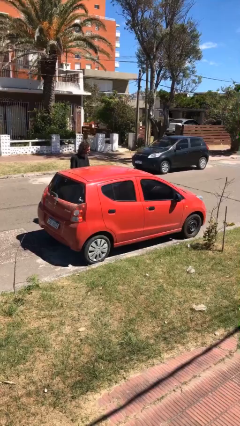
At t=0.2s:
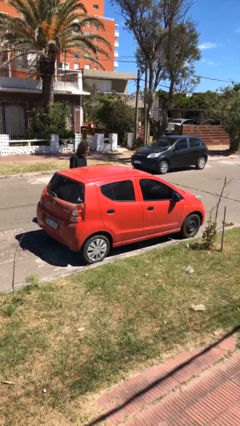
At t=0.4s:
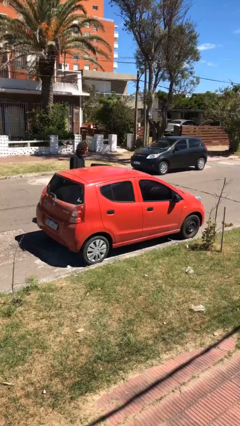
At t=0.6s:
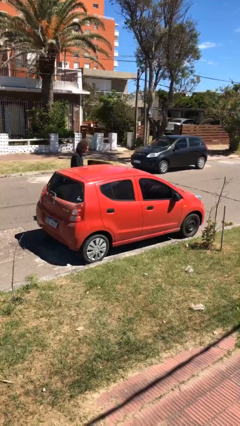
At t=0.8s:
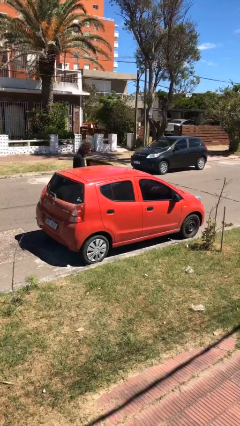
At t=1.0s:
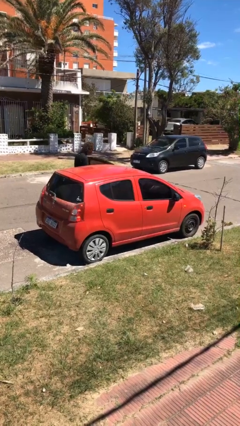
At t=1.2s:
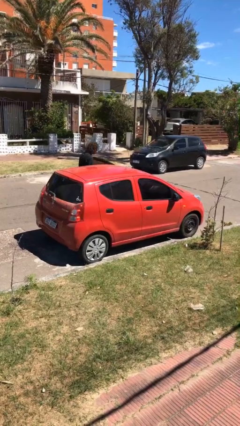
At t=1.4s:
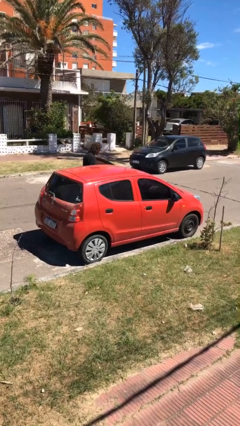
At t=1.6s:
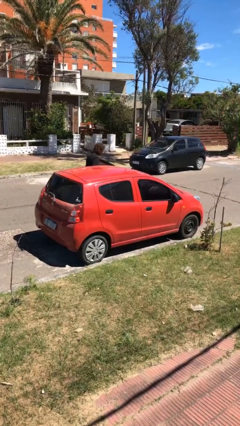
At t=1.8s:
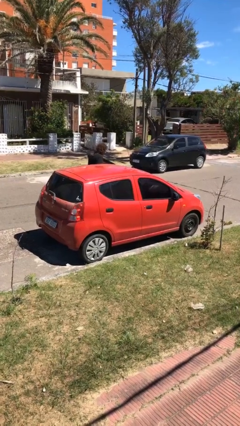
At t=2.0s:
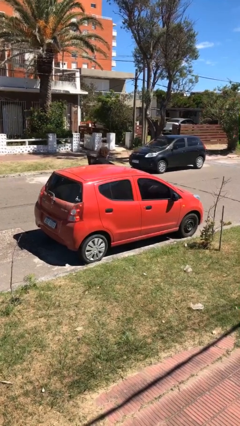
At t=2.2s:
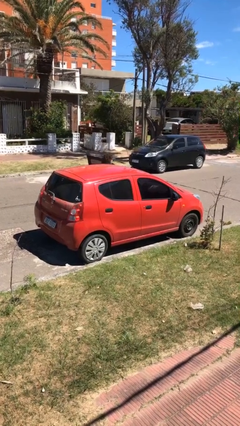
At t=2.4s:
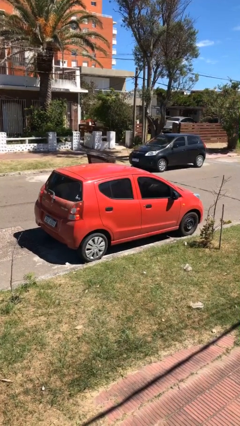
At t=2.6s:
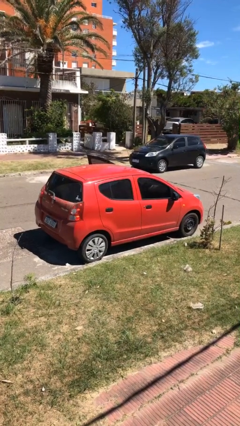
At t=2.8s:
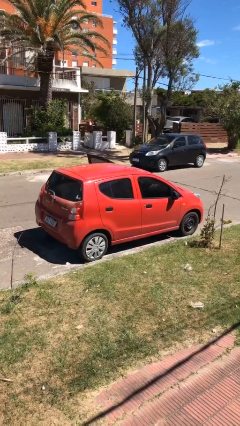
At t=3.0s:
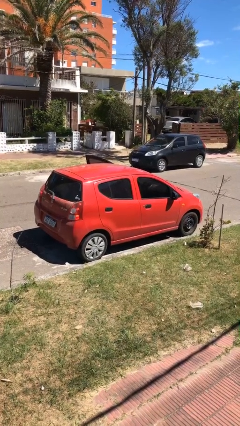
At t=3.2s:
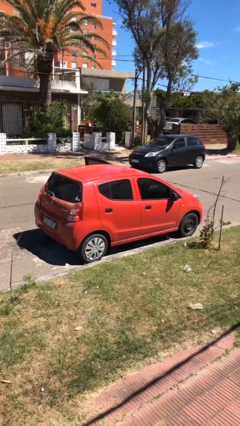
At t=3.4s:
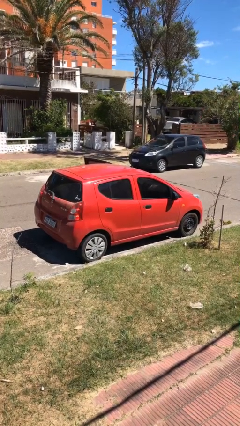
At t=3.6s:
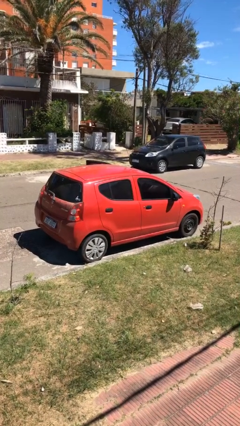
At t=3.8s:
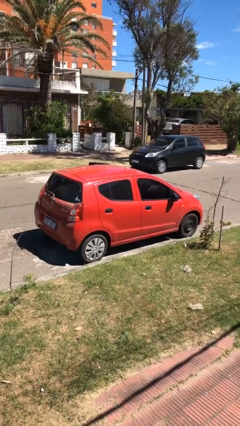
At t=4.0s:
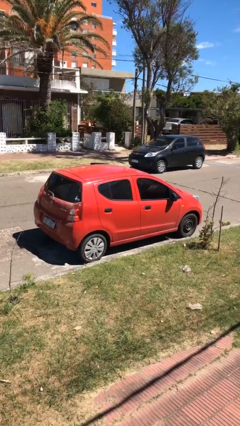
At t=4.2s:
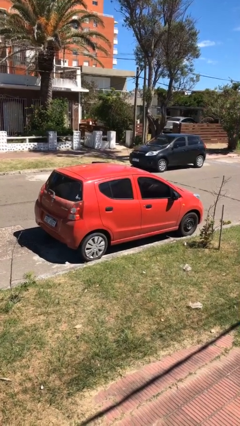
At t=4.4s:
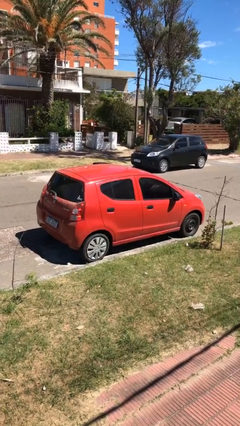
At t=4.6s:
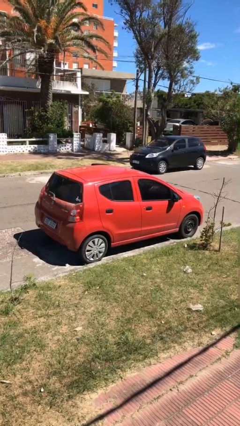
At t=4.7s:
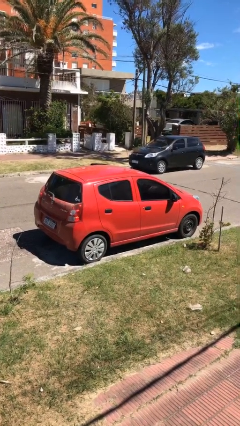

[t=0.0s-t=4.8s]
car picks up person

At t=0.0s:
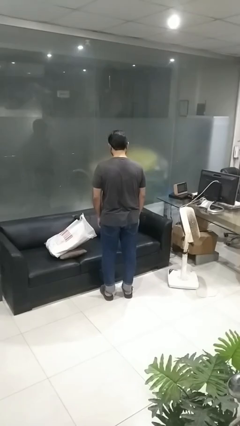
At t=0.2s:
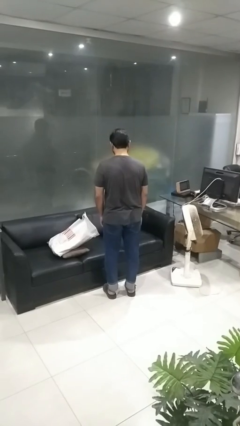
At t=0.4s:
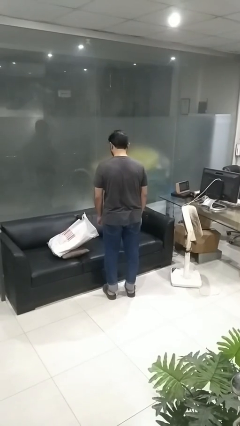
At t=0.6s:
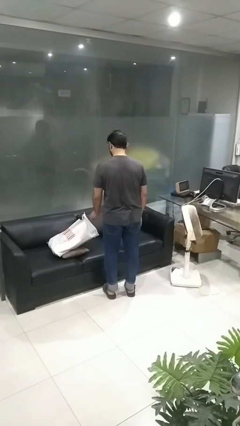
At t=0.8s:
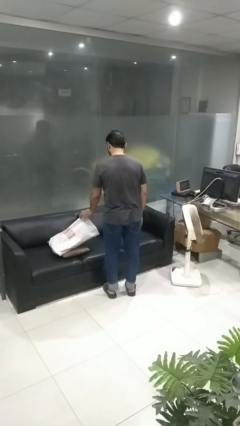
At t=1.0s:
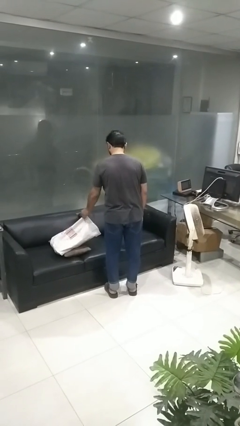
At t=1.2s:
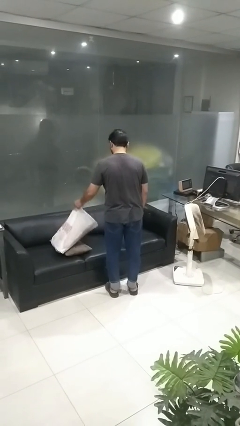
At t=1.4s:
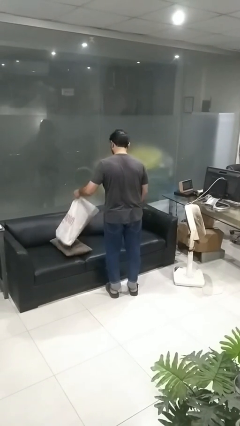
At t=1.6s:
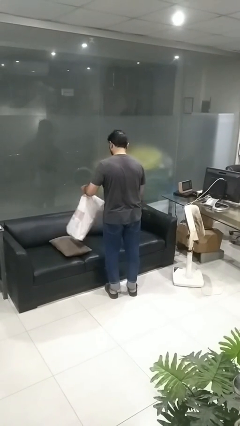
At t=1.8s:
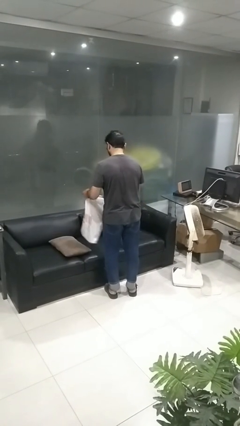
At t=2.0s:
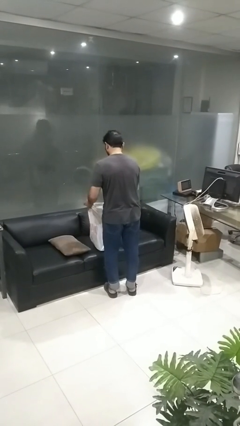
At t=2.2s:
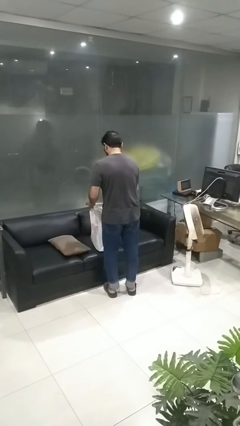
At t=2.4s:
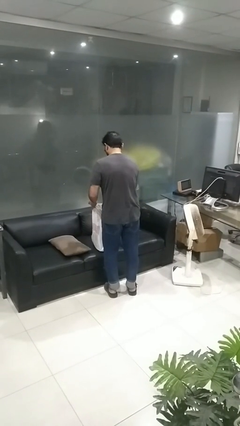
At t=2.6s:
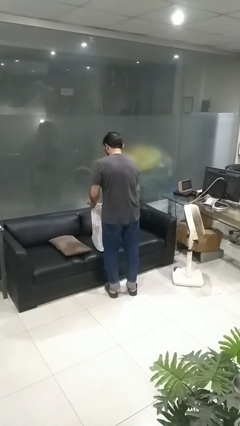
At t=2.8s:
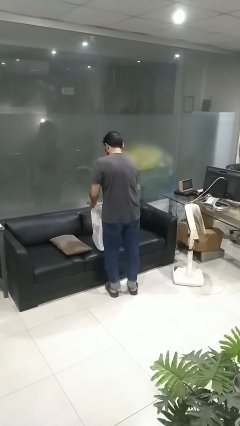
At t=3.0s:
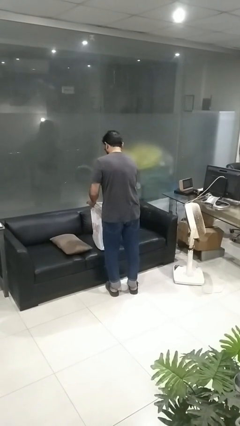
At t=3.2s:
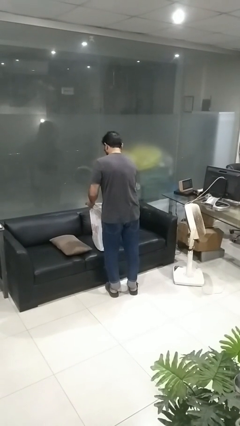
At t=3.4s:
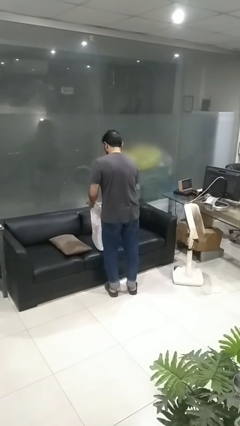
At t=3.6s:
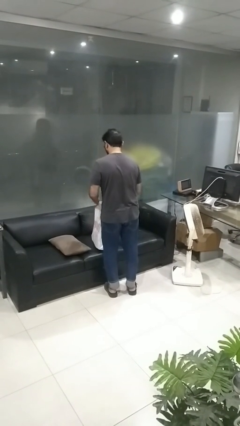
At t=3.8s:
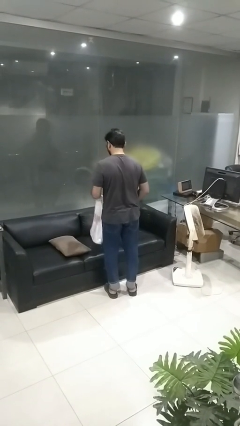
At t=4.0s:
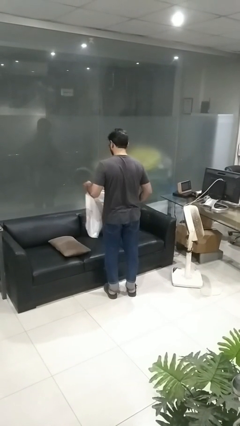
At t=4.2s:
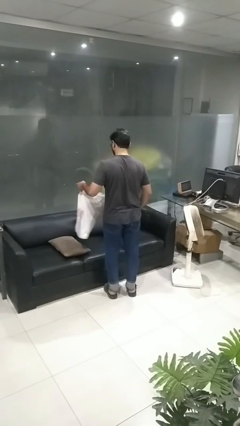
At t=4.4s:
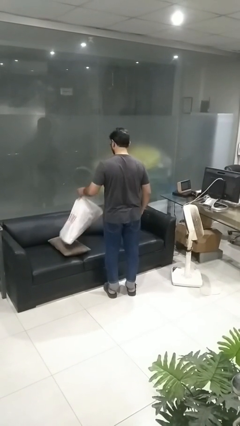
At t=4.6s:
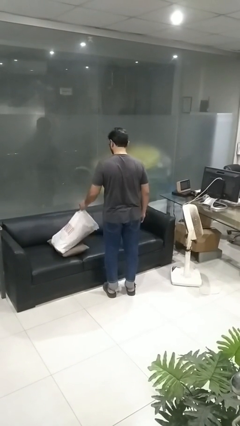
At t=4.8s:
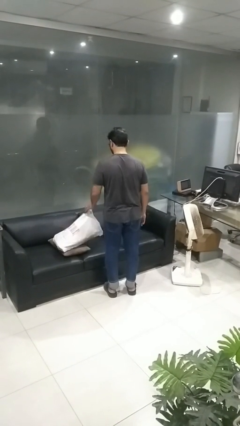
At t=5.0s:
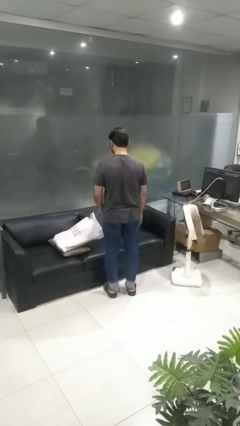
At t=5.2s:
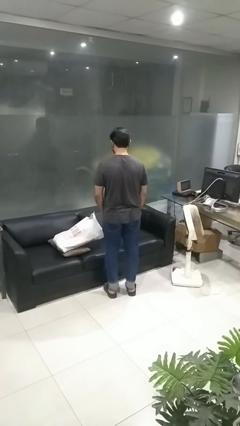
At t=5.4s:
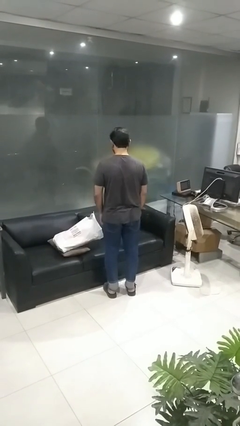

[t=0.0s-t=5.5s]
person searches in bag

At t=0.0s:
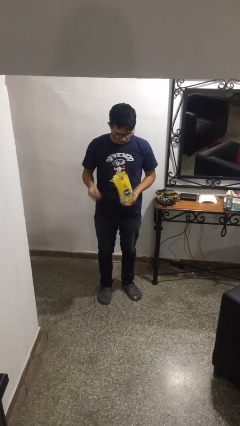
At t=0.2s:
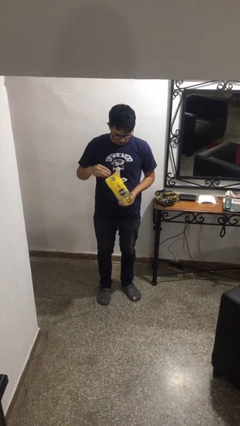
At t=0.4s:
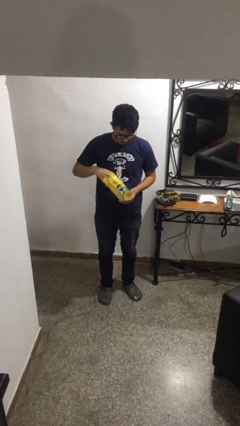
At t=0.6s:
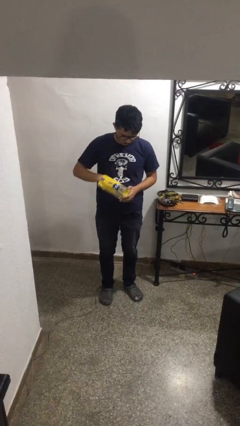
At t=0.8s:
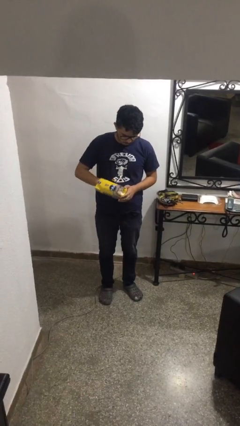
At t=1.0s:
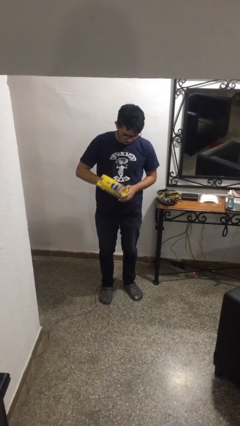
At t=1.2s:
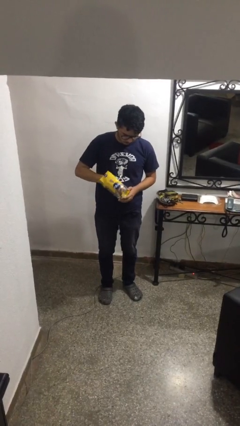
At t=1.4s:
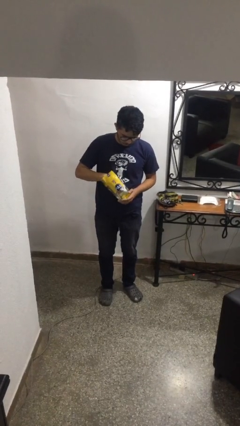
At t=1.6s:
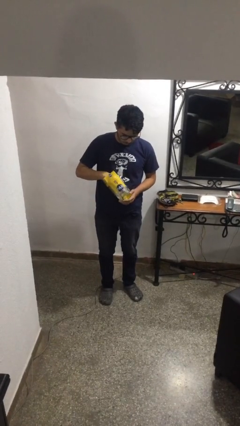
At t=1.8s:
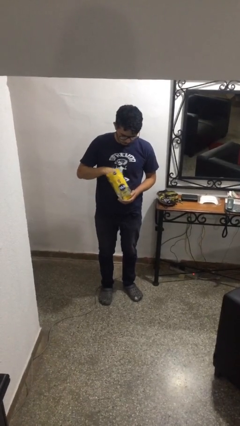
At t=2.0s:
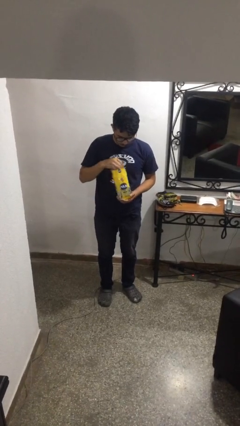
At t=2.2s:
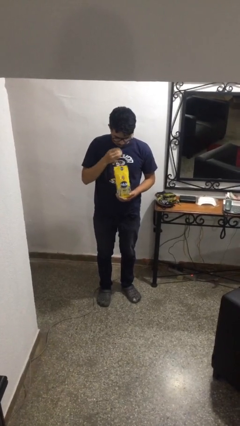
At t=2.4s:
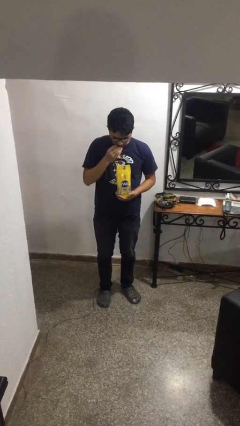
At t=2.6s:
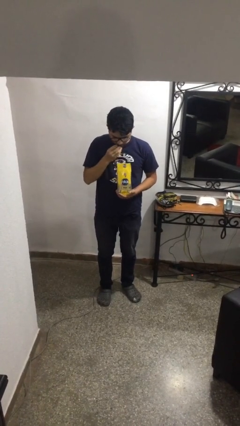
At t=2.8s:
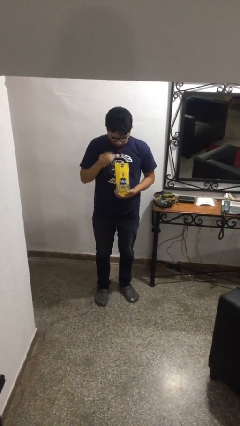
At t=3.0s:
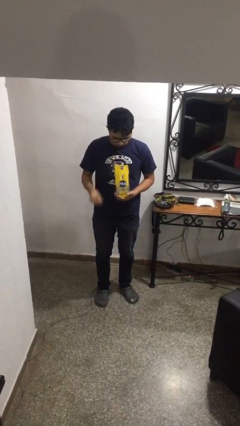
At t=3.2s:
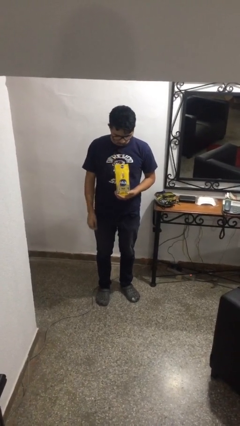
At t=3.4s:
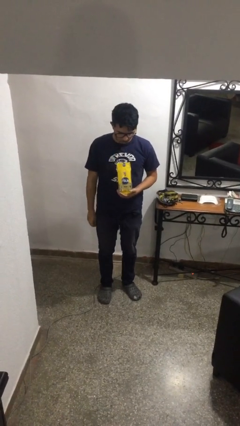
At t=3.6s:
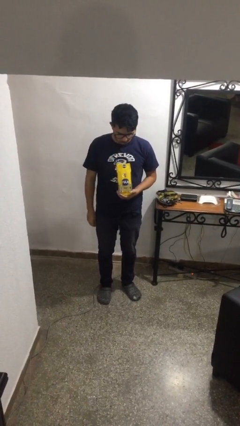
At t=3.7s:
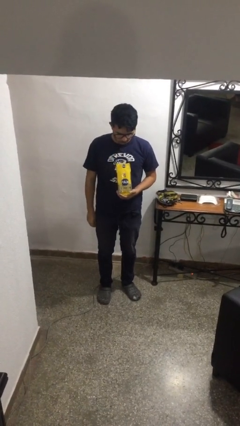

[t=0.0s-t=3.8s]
person eats snack from bag

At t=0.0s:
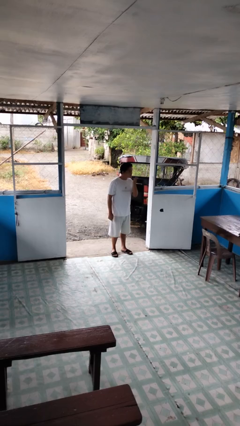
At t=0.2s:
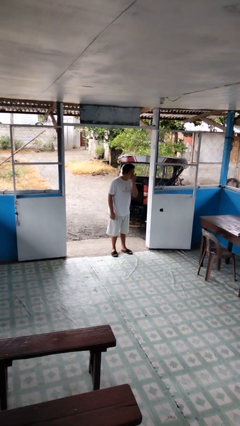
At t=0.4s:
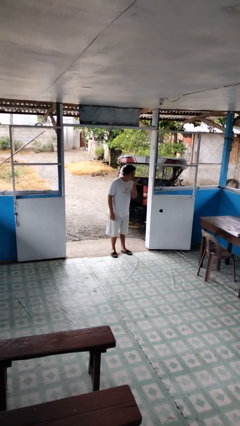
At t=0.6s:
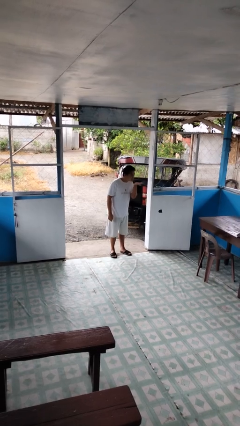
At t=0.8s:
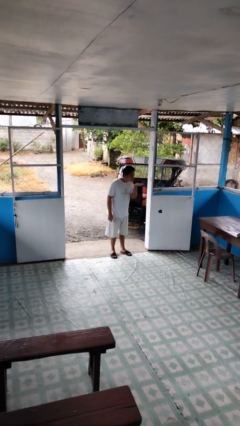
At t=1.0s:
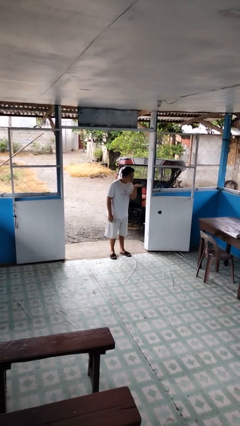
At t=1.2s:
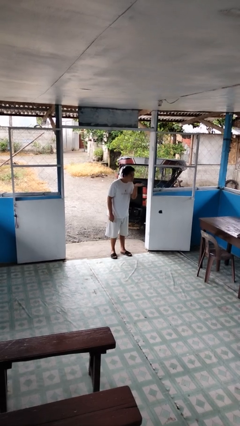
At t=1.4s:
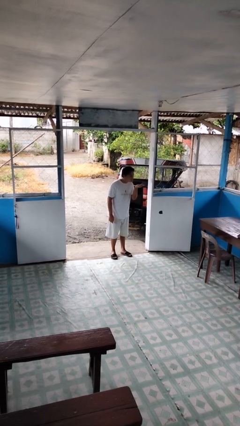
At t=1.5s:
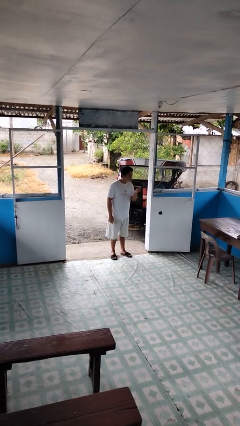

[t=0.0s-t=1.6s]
person gestures blow kiss

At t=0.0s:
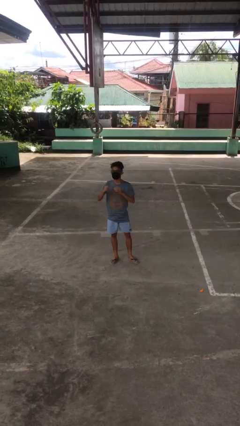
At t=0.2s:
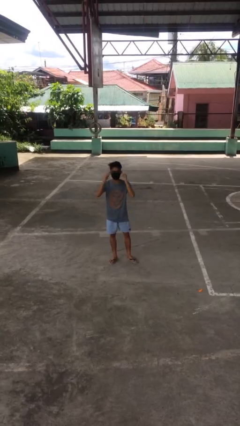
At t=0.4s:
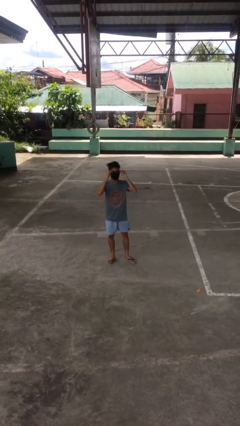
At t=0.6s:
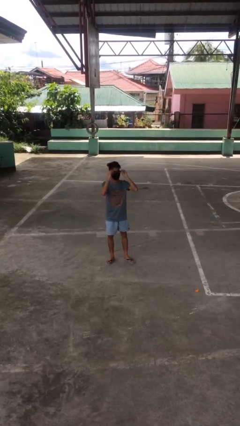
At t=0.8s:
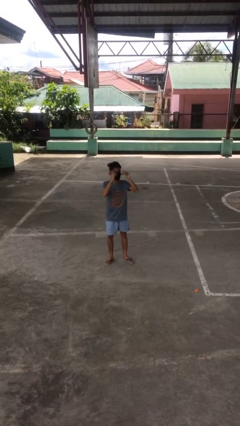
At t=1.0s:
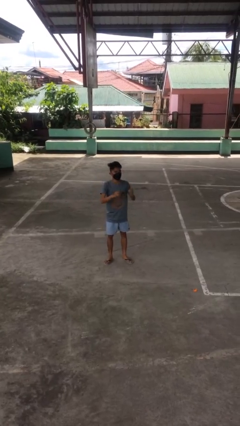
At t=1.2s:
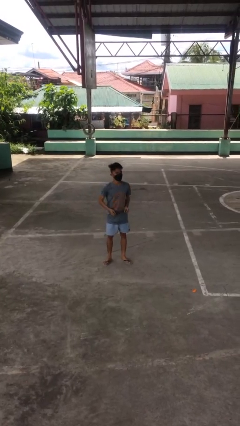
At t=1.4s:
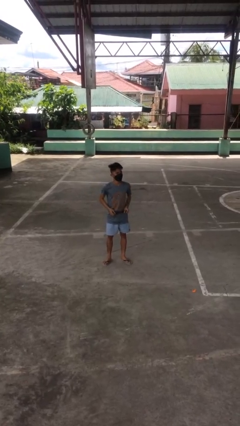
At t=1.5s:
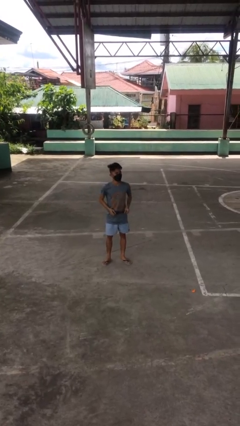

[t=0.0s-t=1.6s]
person takes off glasses
